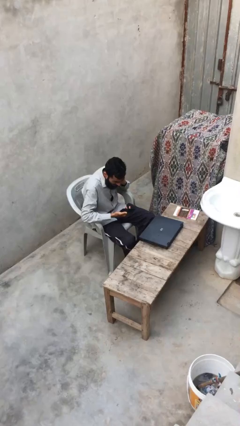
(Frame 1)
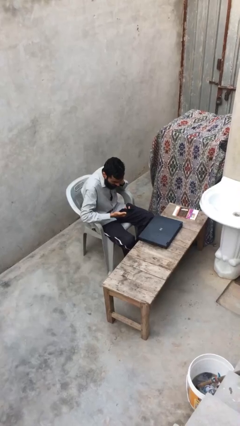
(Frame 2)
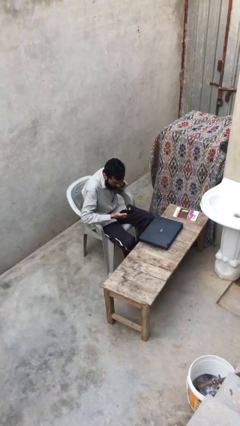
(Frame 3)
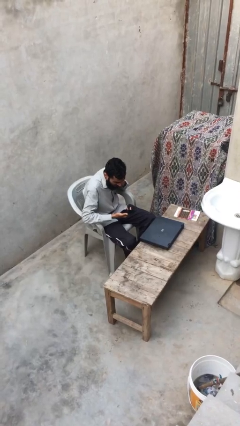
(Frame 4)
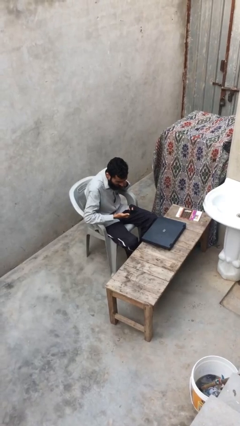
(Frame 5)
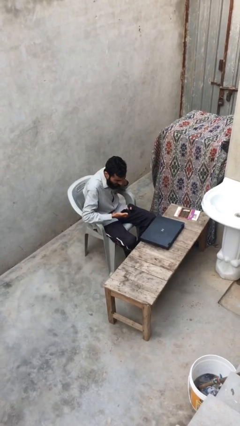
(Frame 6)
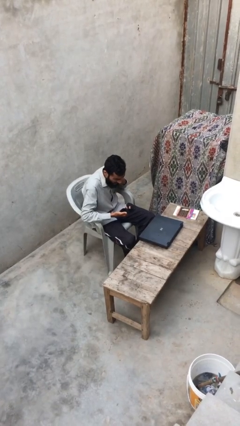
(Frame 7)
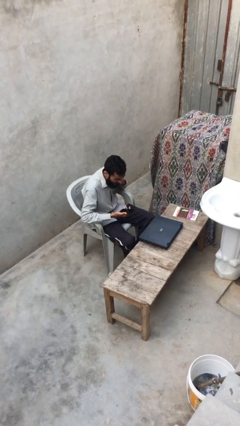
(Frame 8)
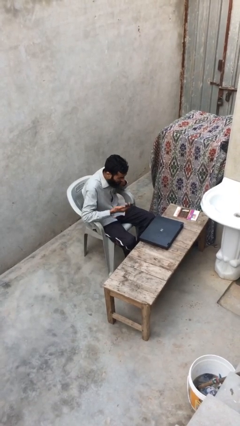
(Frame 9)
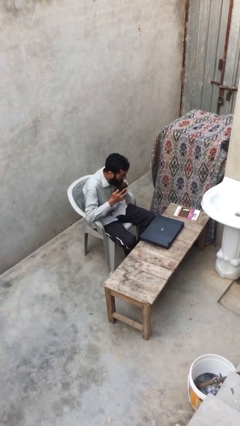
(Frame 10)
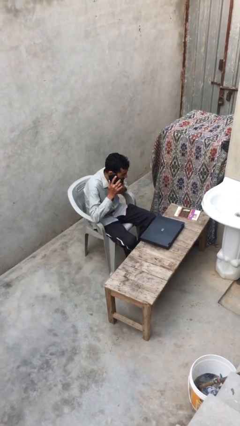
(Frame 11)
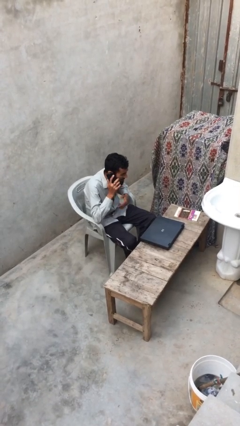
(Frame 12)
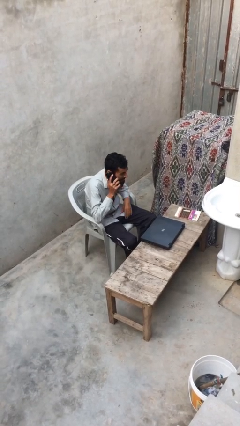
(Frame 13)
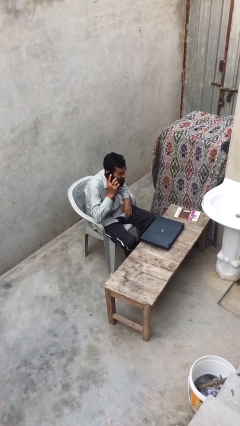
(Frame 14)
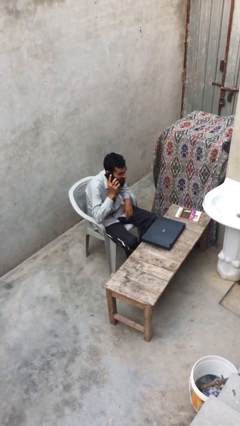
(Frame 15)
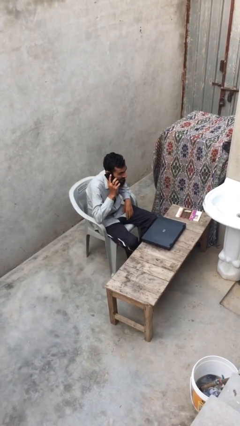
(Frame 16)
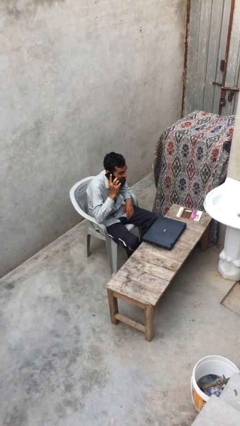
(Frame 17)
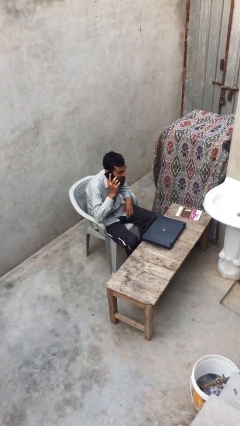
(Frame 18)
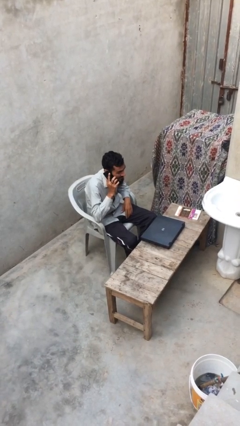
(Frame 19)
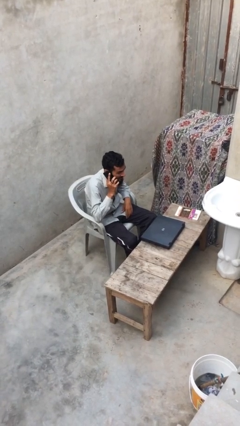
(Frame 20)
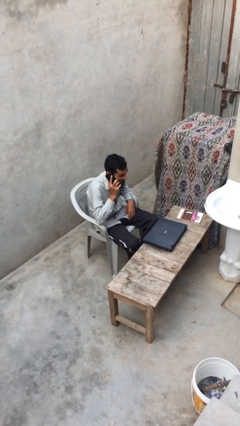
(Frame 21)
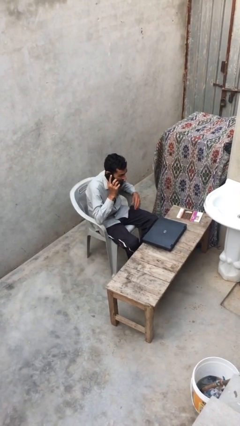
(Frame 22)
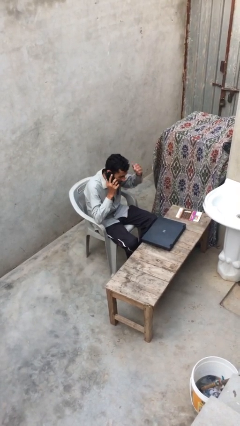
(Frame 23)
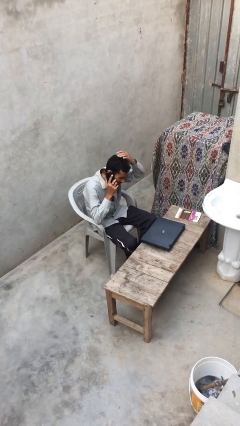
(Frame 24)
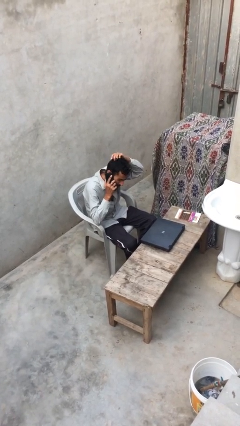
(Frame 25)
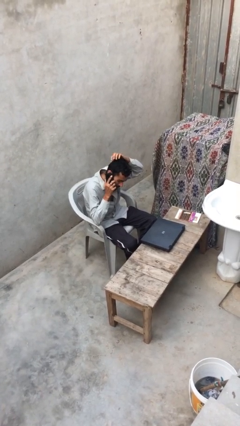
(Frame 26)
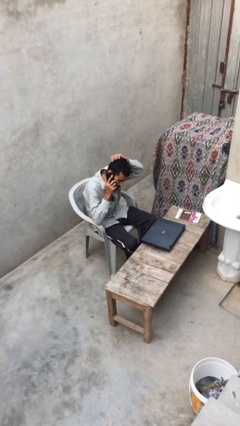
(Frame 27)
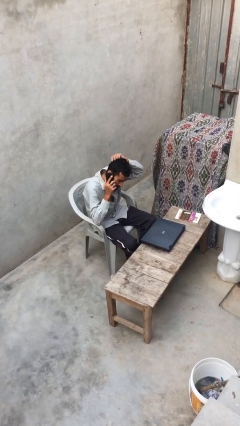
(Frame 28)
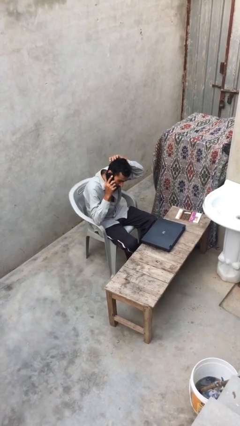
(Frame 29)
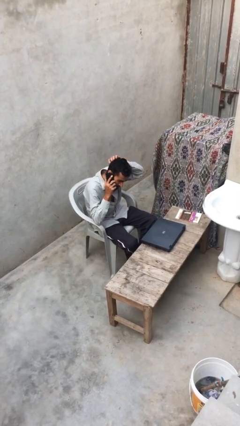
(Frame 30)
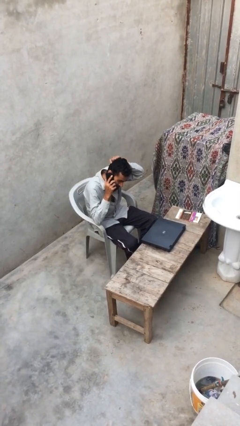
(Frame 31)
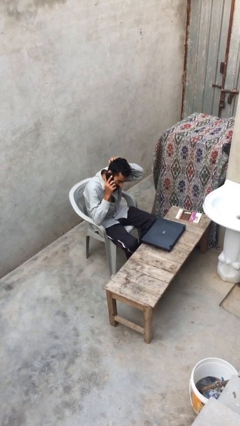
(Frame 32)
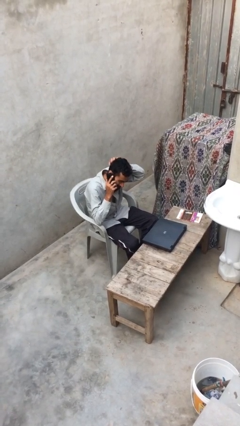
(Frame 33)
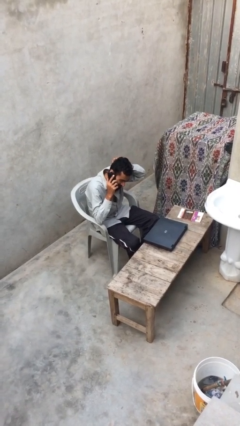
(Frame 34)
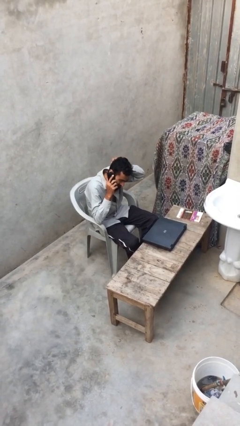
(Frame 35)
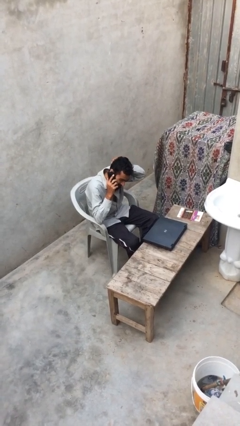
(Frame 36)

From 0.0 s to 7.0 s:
person talks on phone

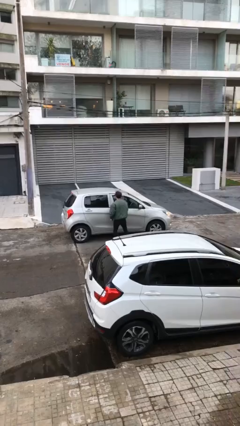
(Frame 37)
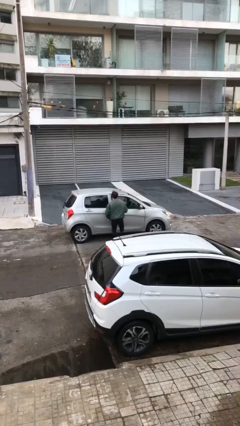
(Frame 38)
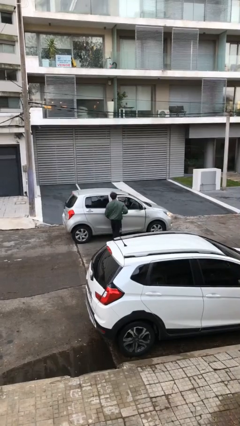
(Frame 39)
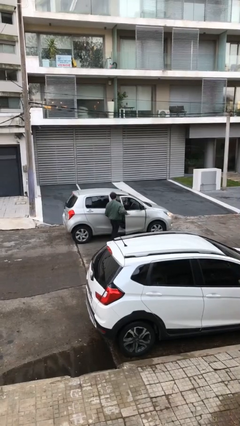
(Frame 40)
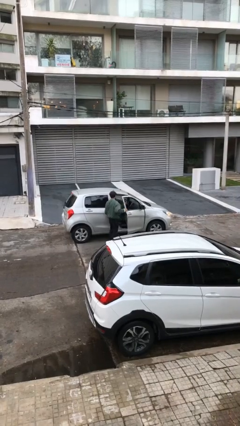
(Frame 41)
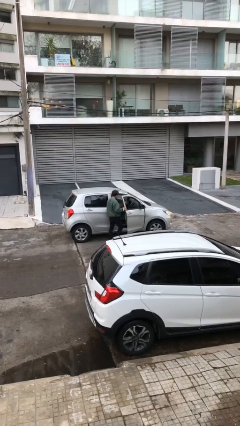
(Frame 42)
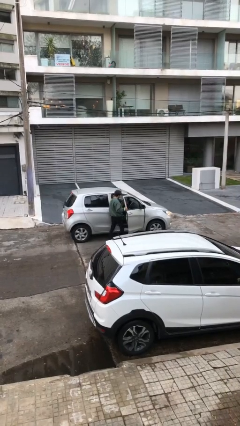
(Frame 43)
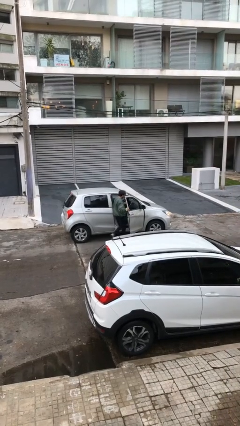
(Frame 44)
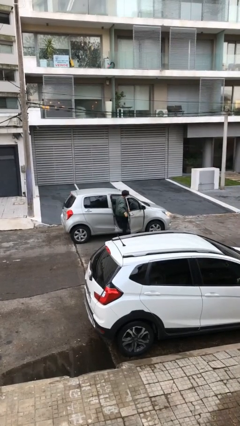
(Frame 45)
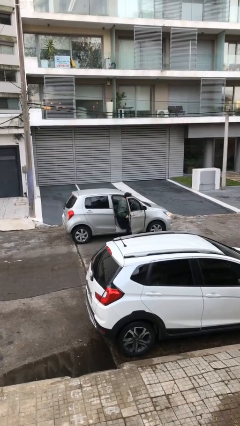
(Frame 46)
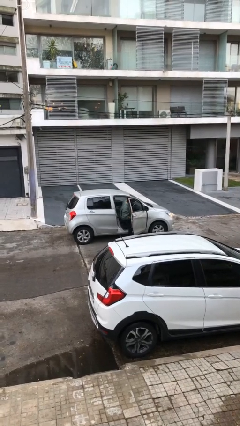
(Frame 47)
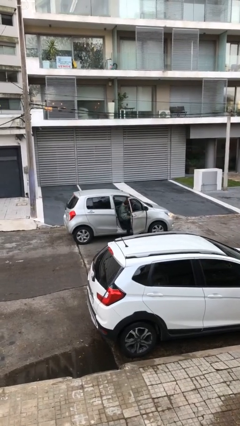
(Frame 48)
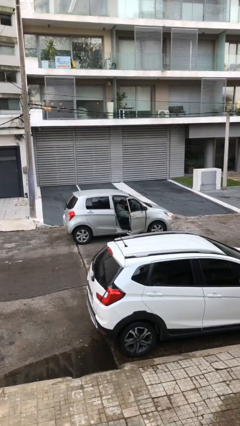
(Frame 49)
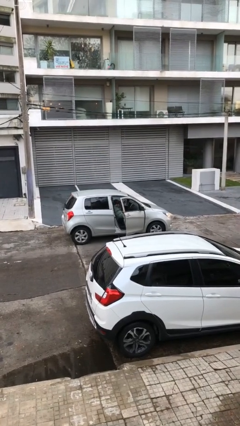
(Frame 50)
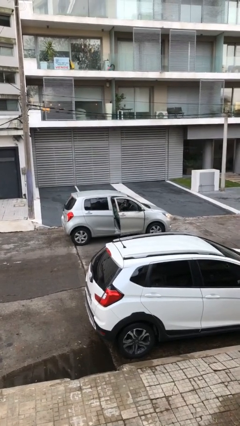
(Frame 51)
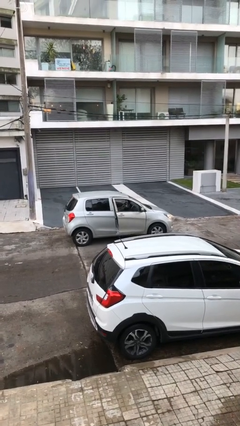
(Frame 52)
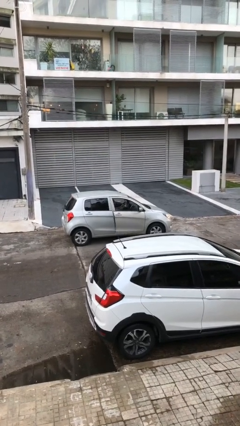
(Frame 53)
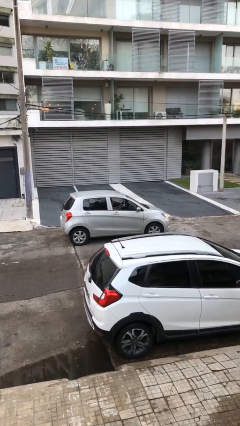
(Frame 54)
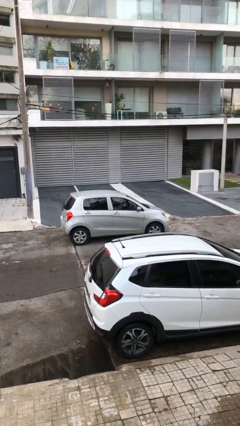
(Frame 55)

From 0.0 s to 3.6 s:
car picks up person

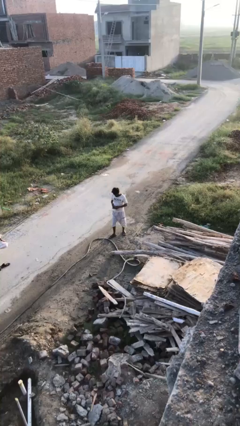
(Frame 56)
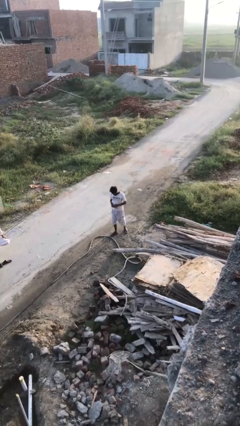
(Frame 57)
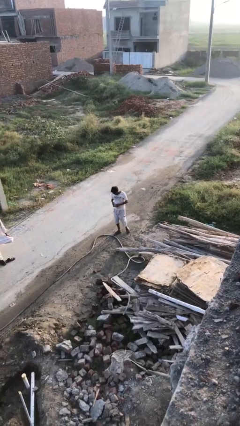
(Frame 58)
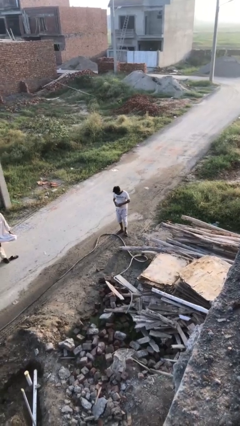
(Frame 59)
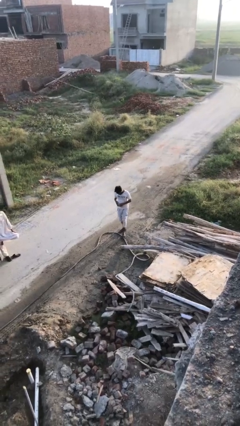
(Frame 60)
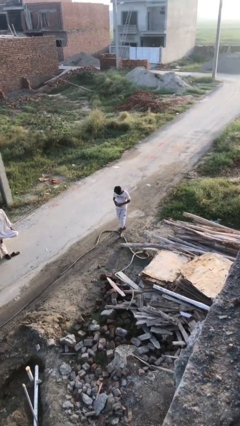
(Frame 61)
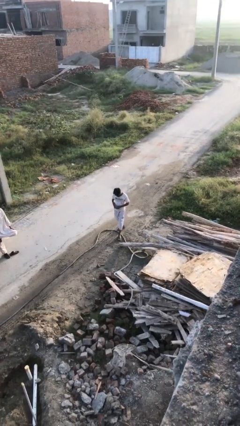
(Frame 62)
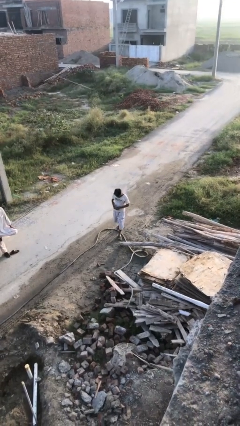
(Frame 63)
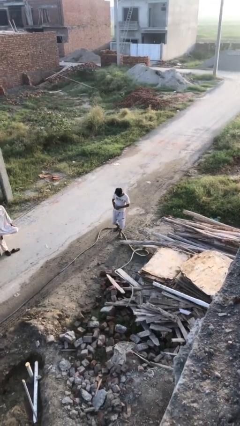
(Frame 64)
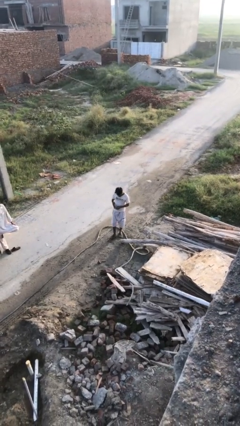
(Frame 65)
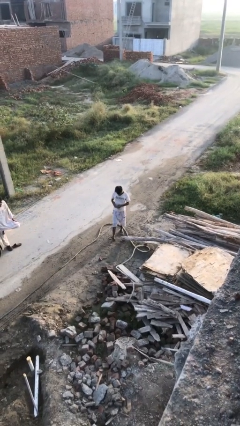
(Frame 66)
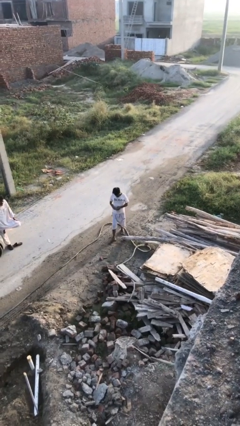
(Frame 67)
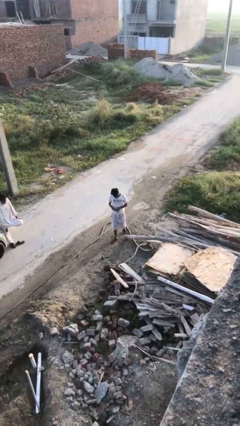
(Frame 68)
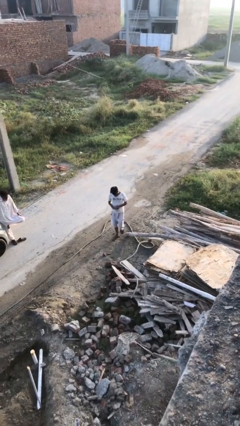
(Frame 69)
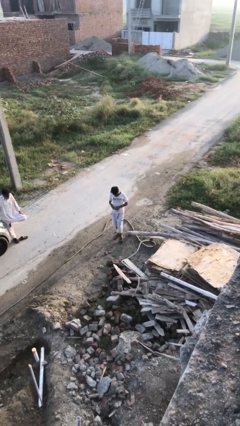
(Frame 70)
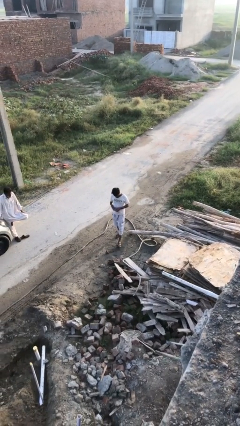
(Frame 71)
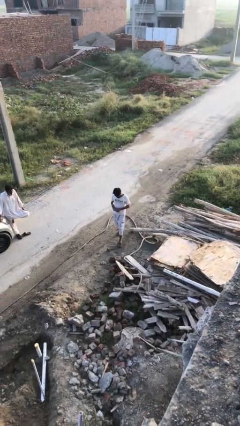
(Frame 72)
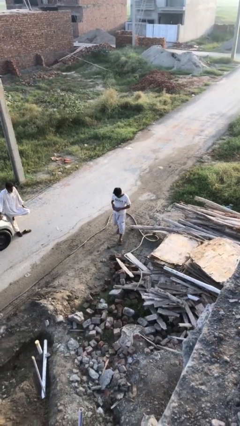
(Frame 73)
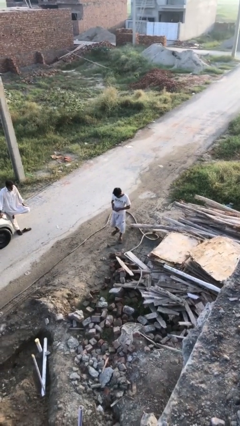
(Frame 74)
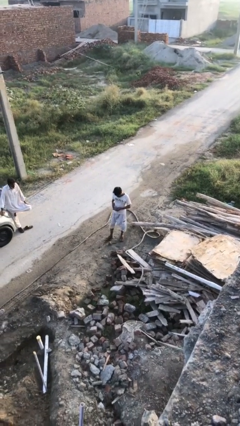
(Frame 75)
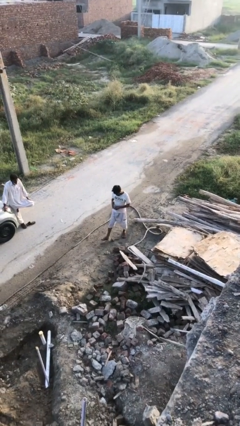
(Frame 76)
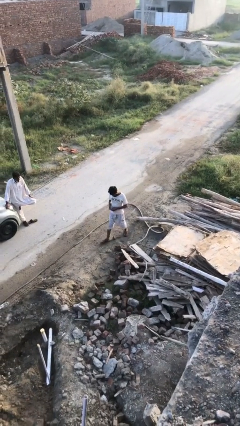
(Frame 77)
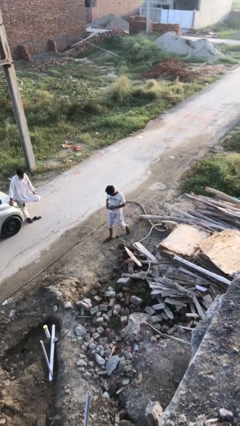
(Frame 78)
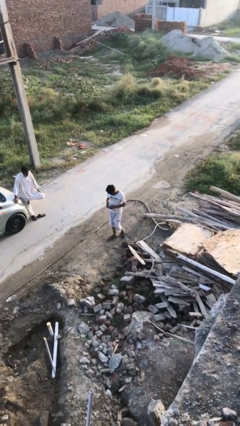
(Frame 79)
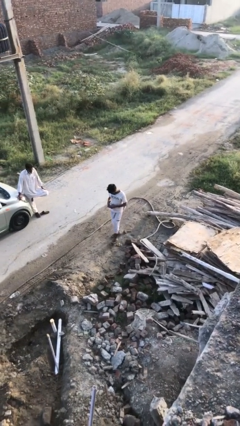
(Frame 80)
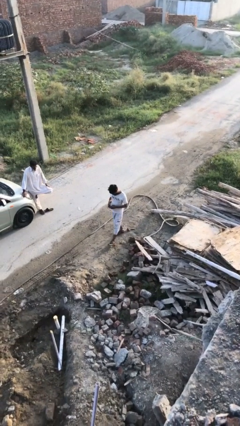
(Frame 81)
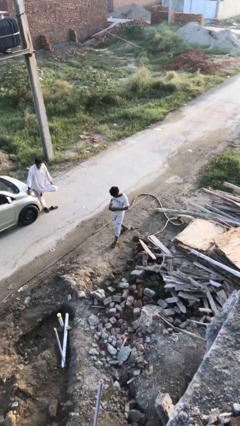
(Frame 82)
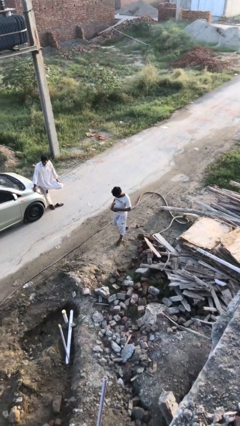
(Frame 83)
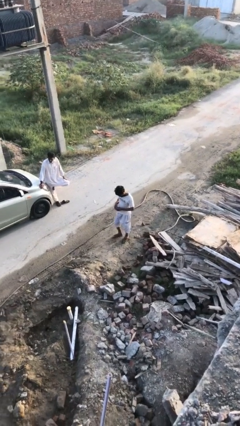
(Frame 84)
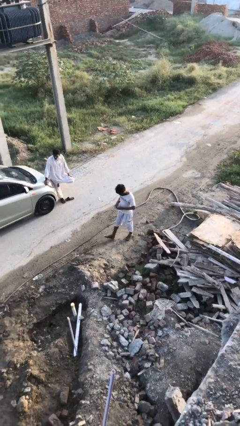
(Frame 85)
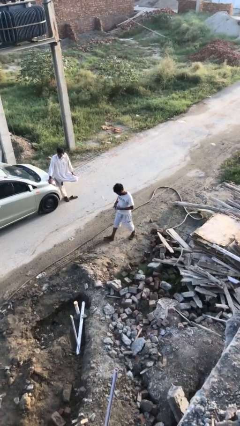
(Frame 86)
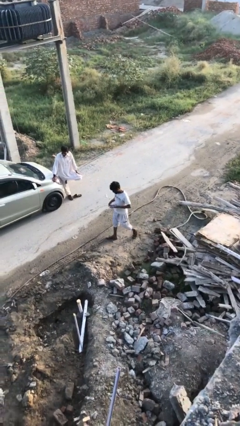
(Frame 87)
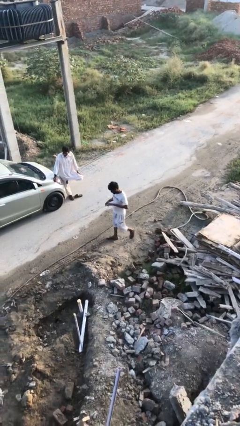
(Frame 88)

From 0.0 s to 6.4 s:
person texts on phone

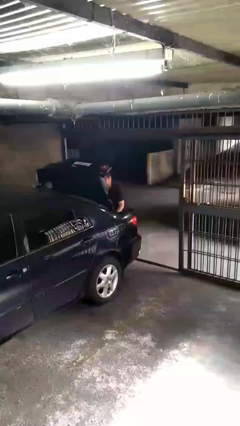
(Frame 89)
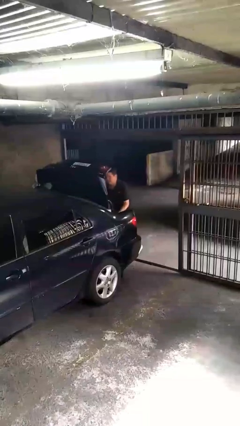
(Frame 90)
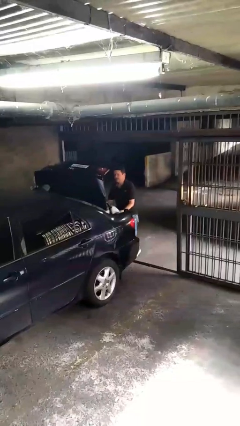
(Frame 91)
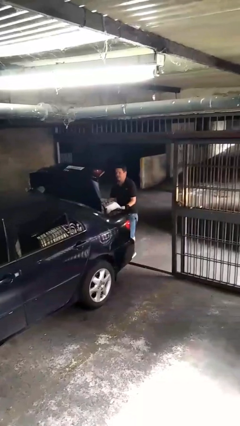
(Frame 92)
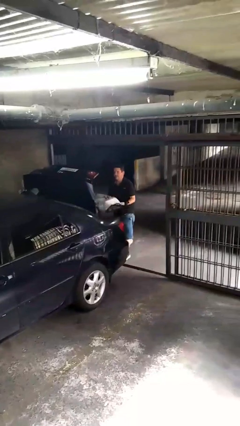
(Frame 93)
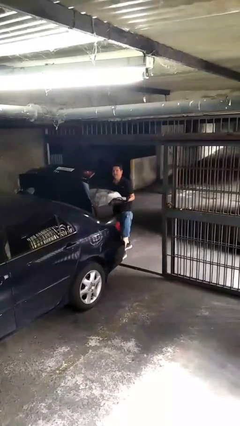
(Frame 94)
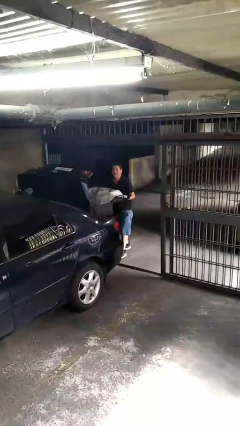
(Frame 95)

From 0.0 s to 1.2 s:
person unloads car
